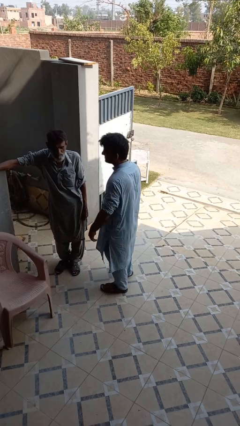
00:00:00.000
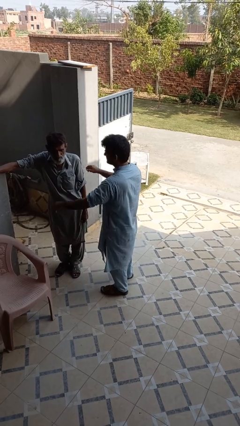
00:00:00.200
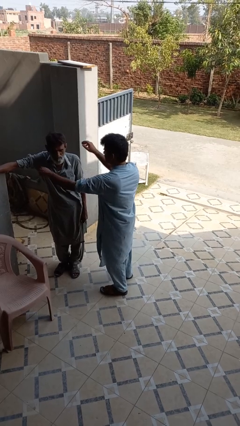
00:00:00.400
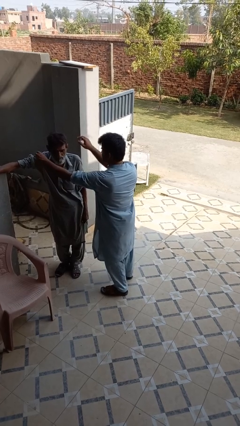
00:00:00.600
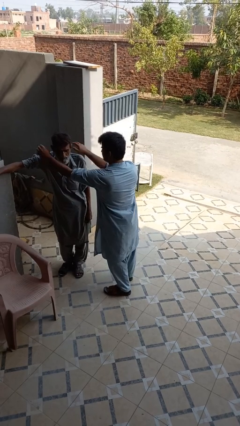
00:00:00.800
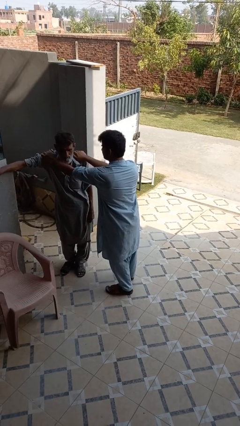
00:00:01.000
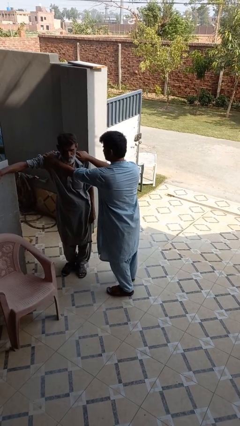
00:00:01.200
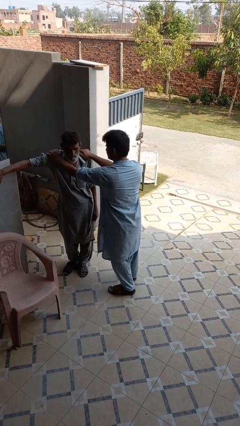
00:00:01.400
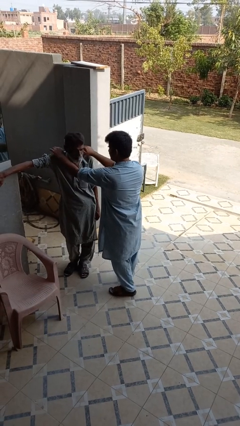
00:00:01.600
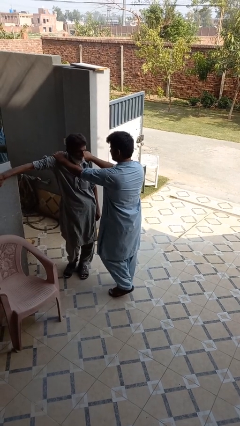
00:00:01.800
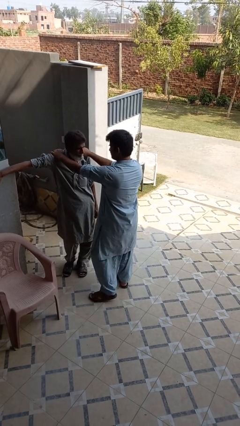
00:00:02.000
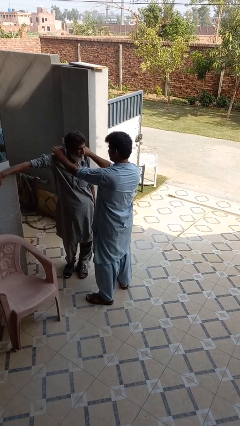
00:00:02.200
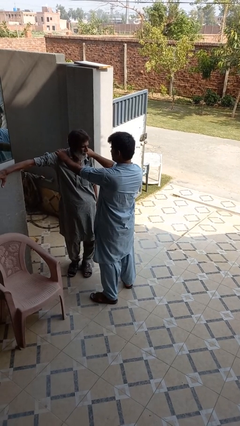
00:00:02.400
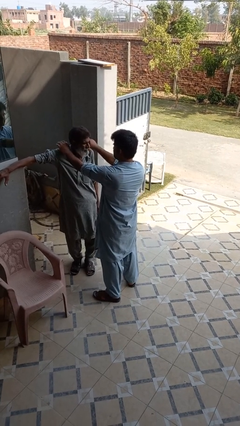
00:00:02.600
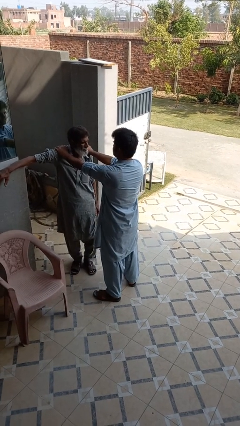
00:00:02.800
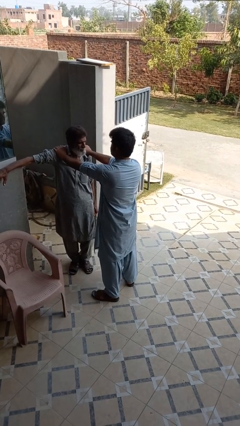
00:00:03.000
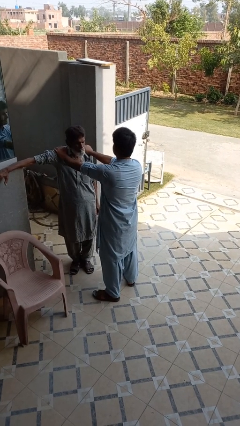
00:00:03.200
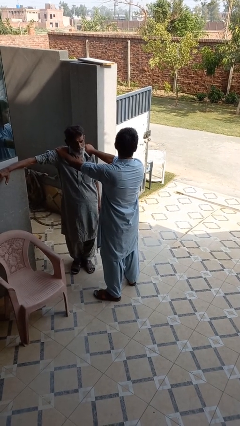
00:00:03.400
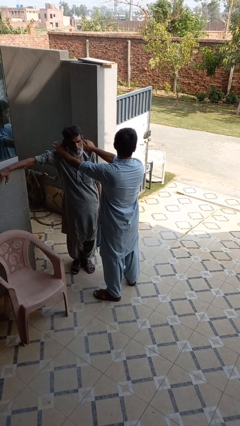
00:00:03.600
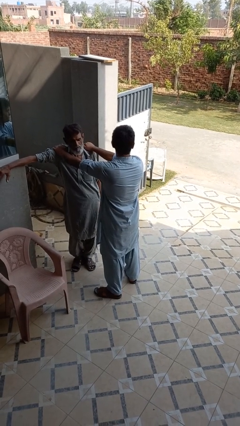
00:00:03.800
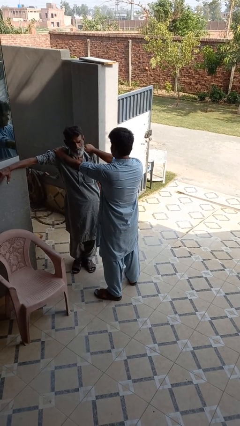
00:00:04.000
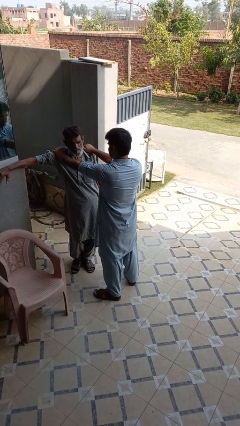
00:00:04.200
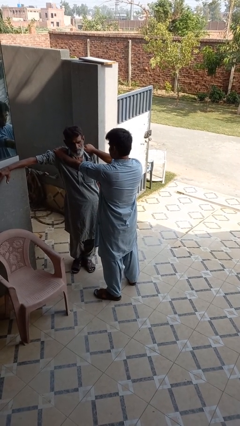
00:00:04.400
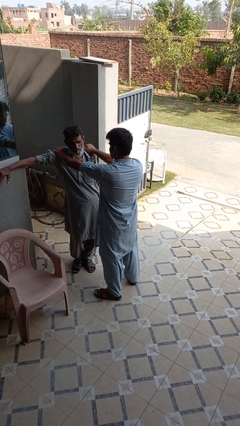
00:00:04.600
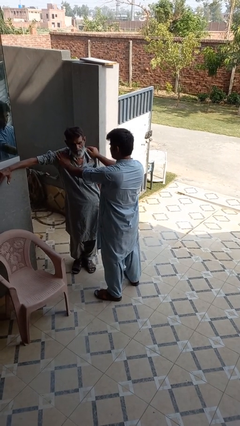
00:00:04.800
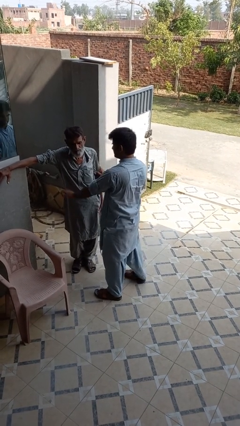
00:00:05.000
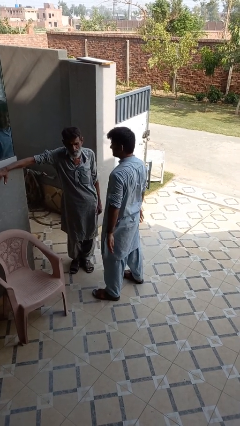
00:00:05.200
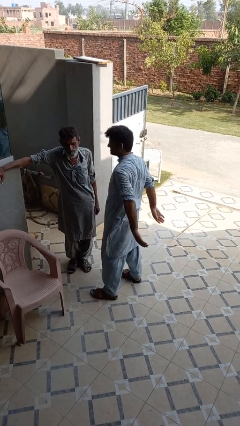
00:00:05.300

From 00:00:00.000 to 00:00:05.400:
person pounds shoulders of person

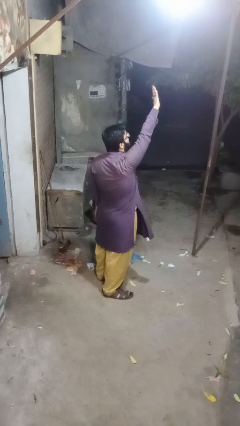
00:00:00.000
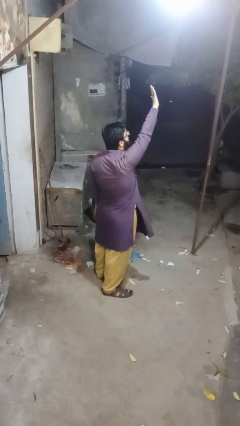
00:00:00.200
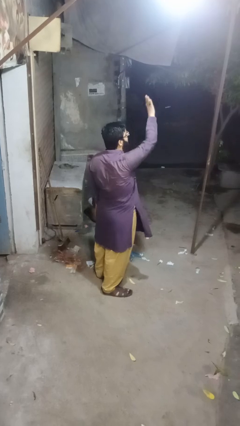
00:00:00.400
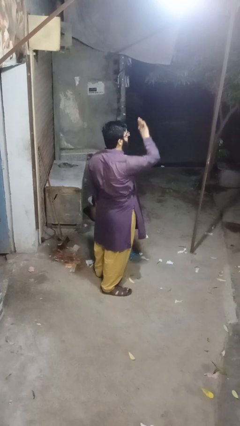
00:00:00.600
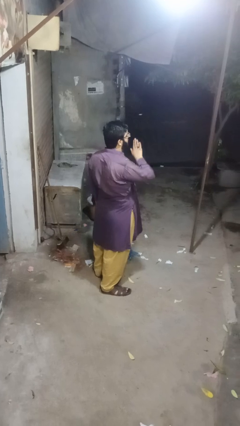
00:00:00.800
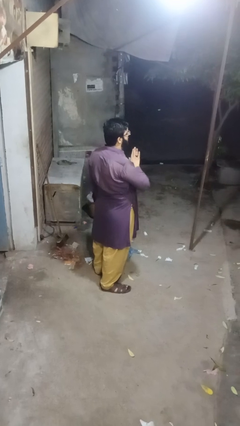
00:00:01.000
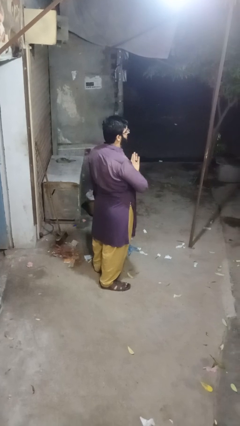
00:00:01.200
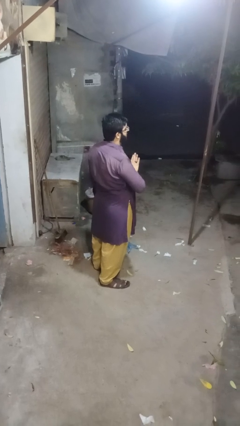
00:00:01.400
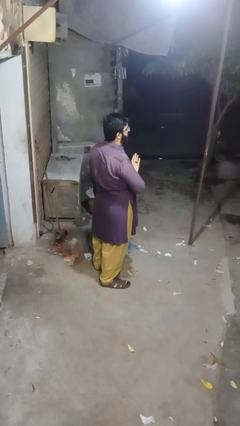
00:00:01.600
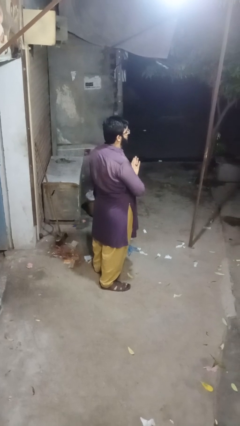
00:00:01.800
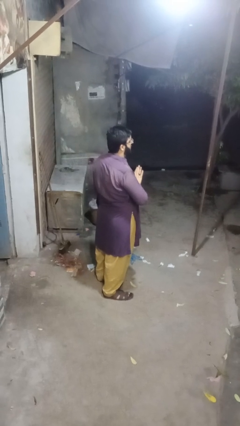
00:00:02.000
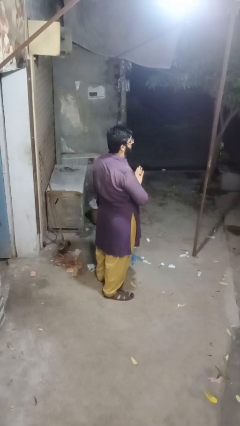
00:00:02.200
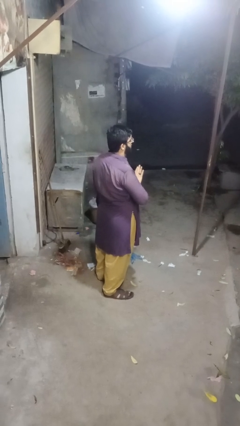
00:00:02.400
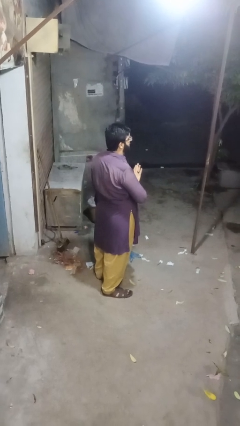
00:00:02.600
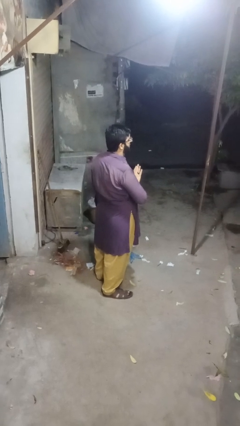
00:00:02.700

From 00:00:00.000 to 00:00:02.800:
person gestures swipe down

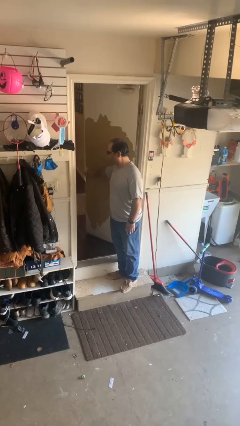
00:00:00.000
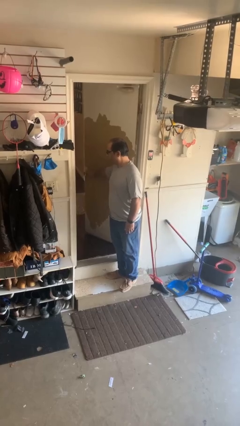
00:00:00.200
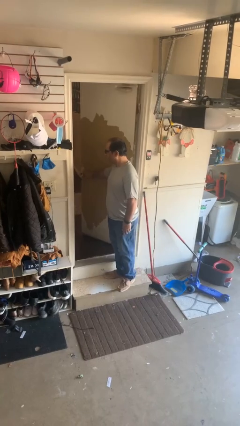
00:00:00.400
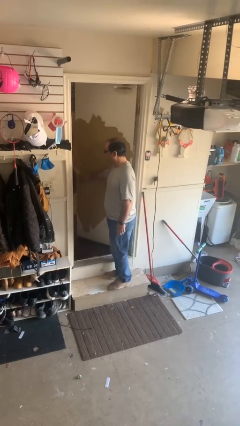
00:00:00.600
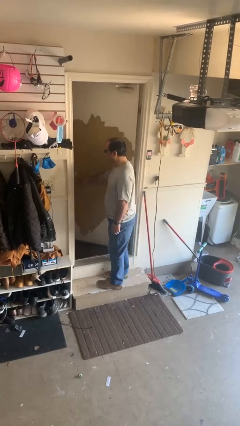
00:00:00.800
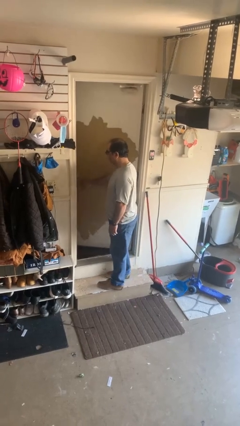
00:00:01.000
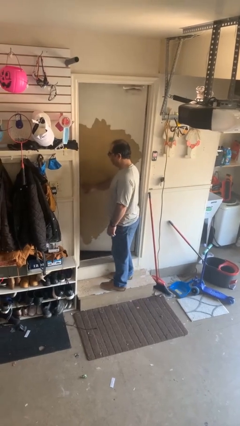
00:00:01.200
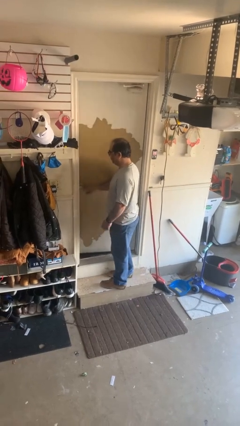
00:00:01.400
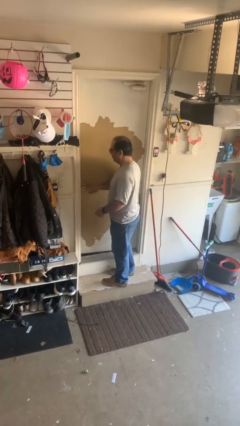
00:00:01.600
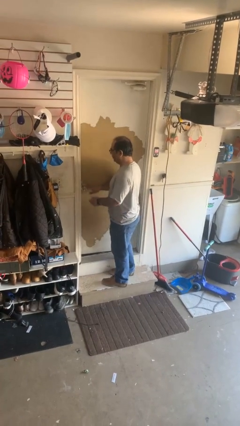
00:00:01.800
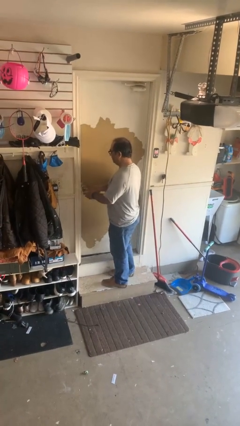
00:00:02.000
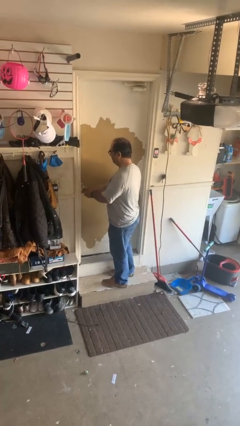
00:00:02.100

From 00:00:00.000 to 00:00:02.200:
person closes facility door

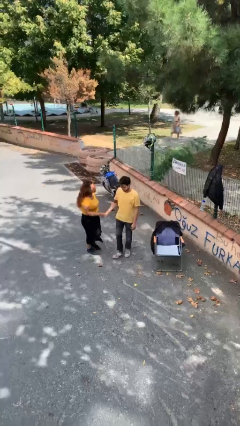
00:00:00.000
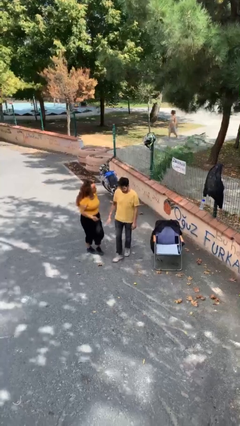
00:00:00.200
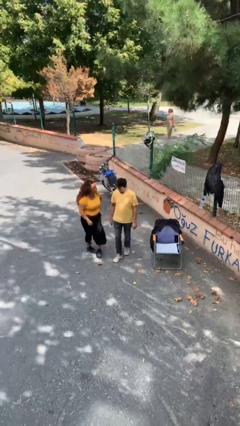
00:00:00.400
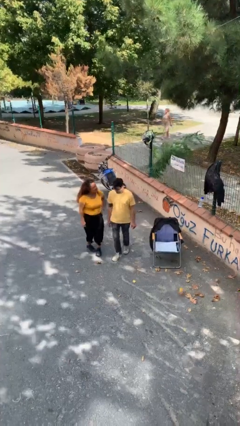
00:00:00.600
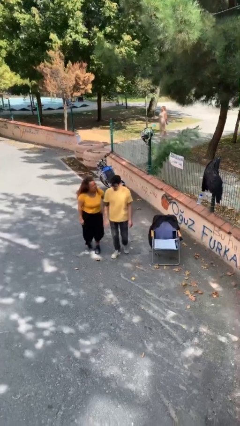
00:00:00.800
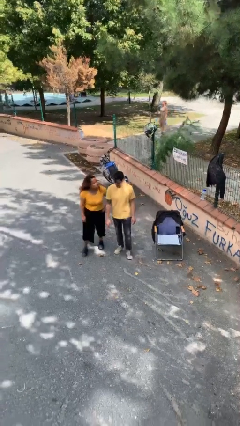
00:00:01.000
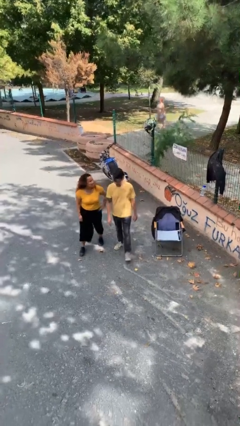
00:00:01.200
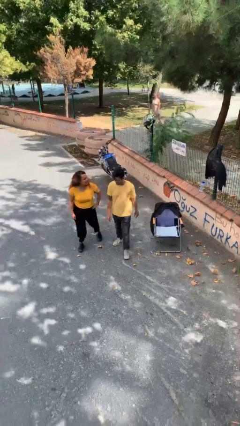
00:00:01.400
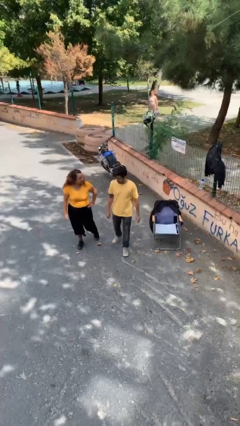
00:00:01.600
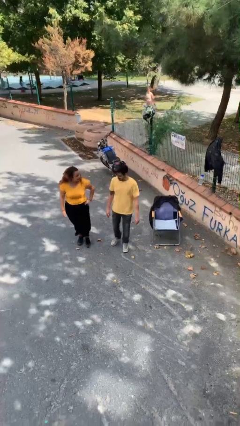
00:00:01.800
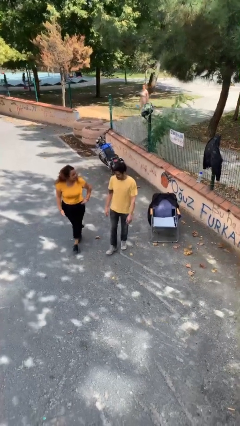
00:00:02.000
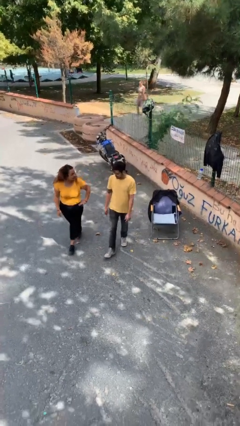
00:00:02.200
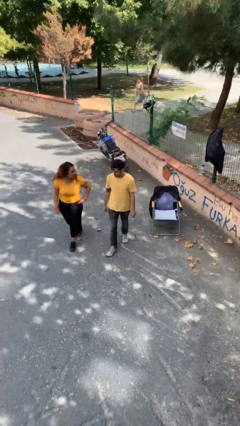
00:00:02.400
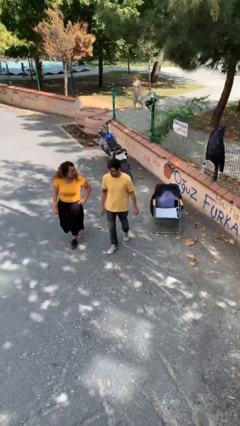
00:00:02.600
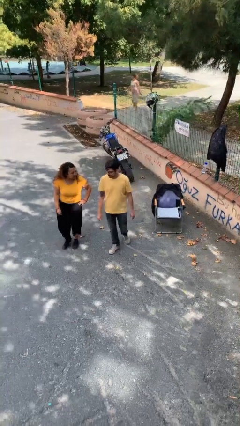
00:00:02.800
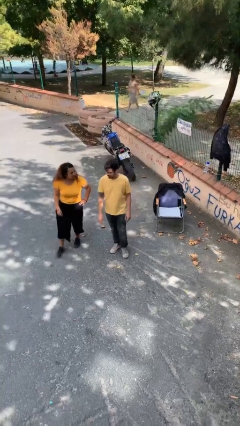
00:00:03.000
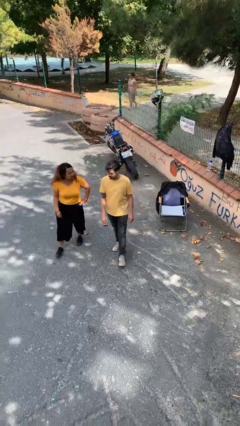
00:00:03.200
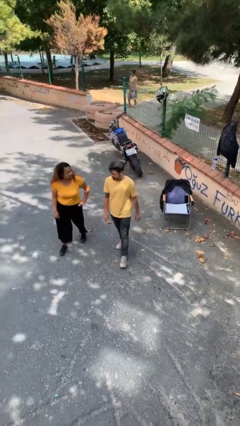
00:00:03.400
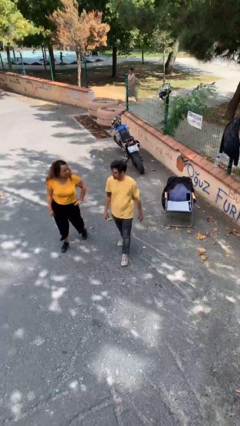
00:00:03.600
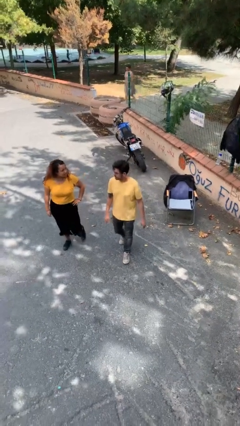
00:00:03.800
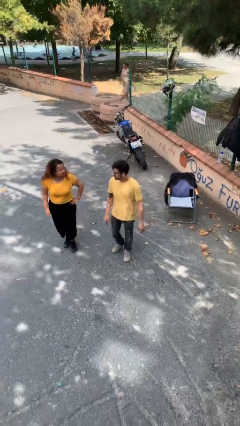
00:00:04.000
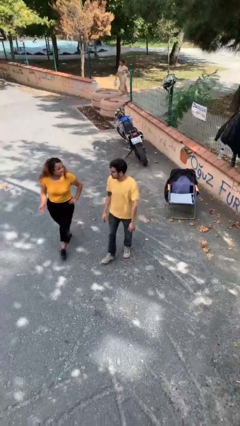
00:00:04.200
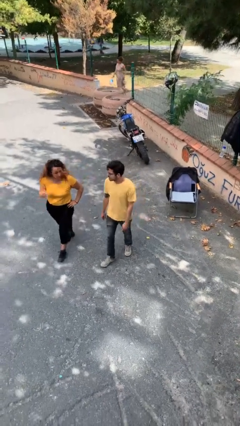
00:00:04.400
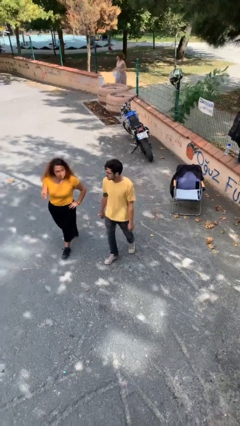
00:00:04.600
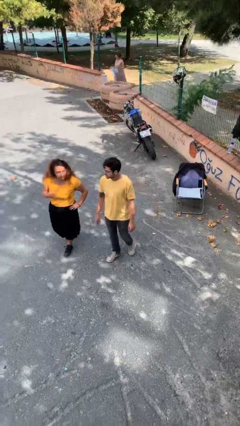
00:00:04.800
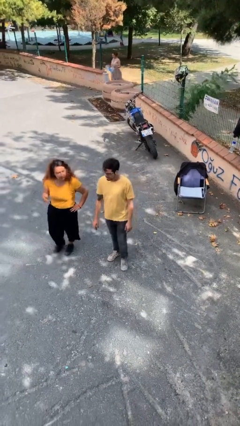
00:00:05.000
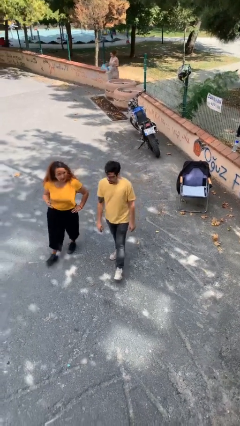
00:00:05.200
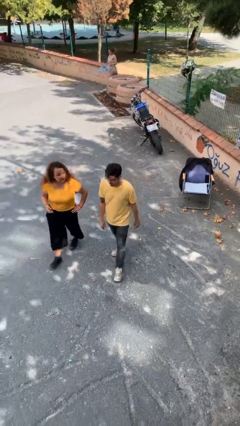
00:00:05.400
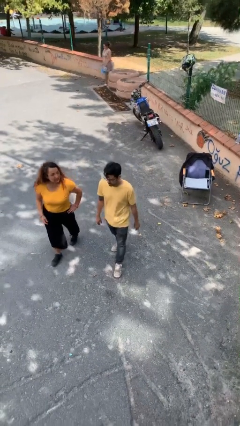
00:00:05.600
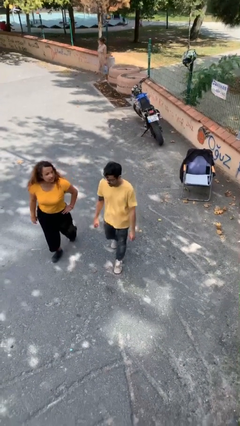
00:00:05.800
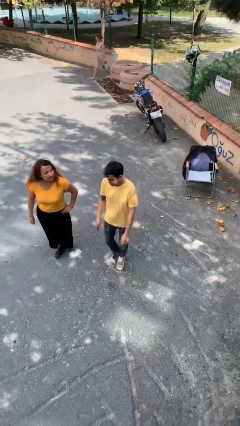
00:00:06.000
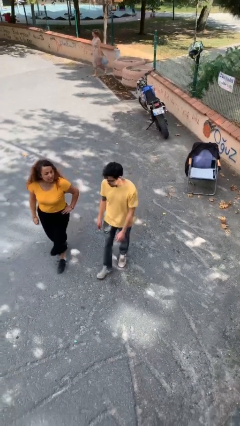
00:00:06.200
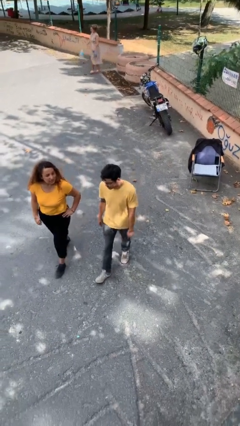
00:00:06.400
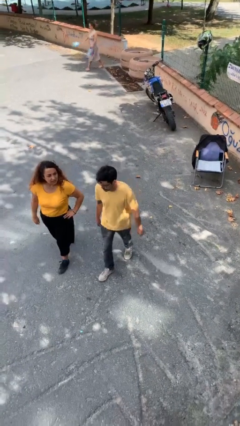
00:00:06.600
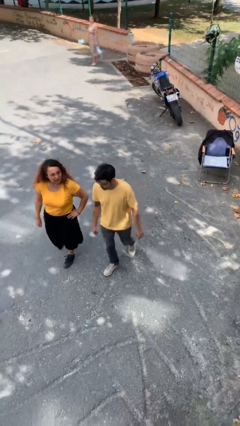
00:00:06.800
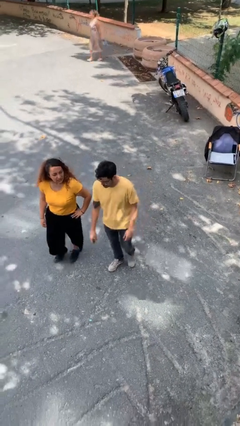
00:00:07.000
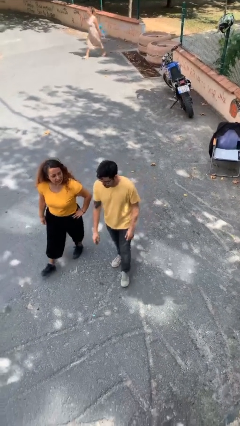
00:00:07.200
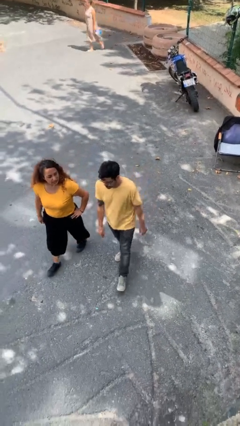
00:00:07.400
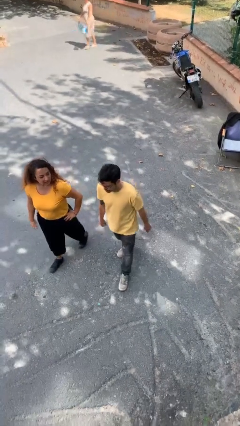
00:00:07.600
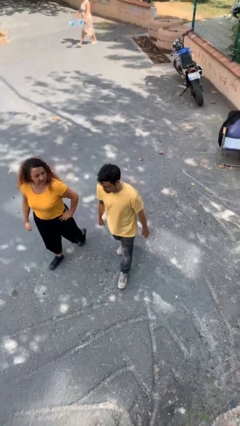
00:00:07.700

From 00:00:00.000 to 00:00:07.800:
person talks to person

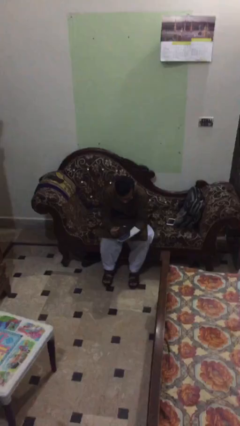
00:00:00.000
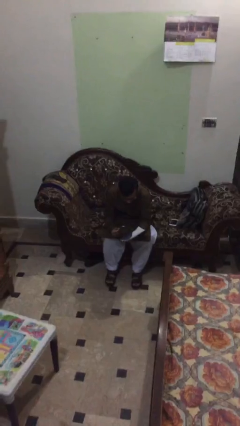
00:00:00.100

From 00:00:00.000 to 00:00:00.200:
person reads document
